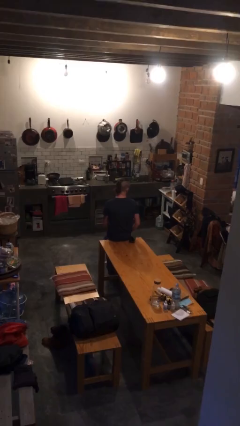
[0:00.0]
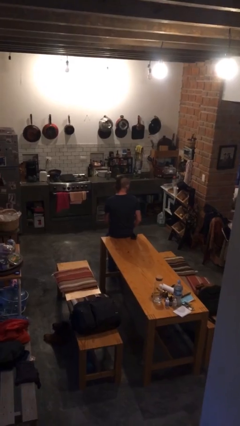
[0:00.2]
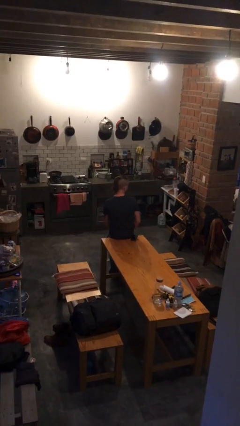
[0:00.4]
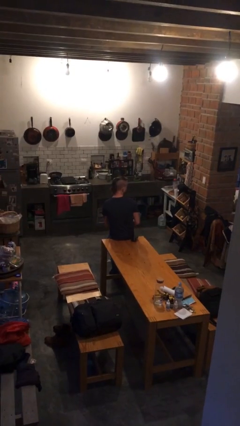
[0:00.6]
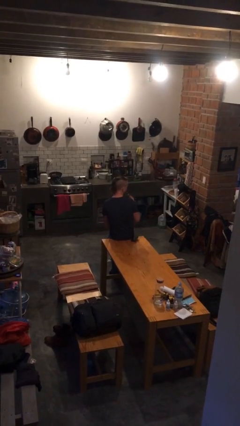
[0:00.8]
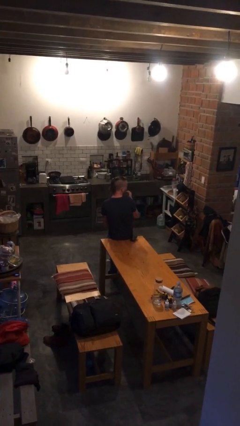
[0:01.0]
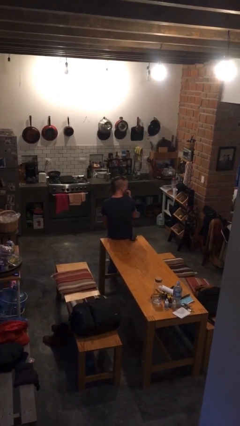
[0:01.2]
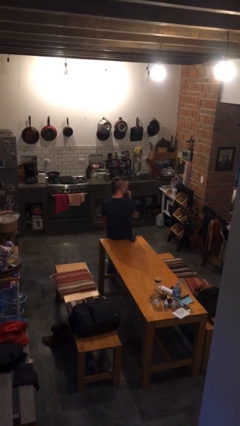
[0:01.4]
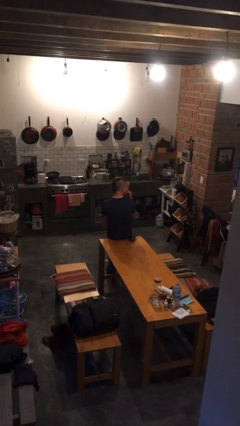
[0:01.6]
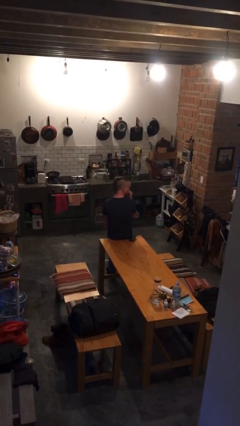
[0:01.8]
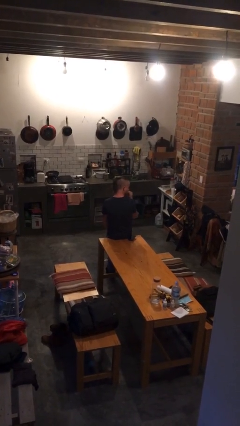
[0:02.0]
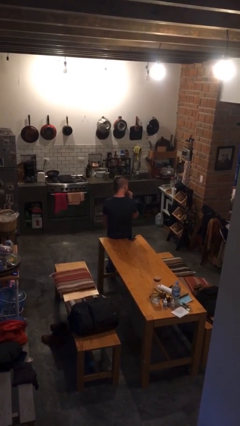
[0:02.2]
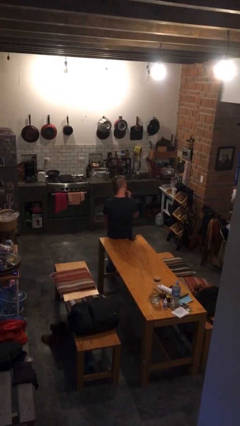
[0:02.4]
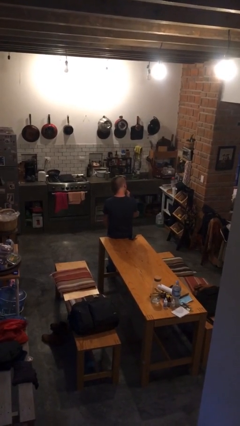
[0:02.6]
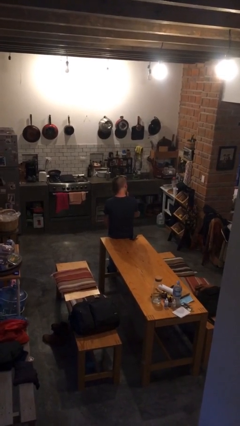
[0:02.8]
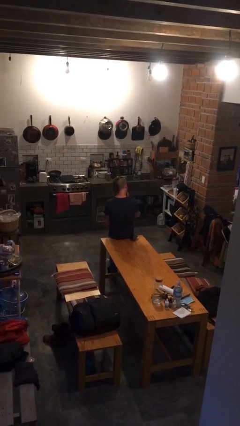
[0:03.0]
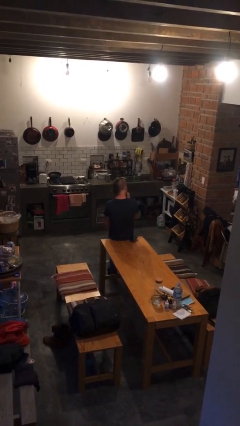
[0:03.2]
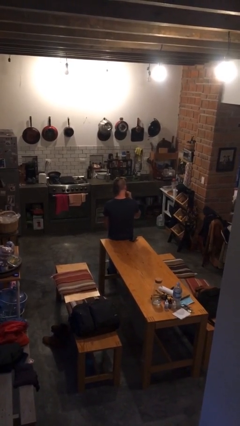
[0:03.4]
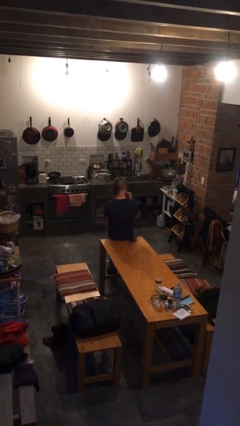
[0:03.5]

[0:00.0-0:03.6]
person applies lip makeup

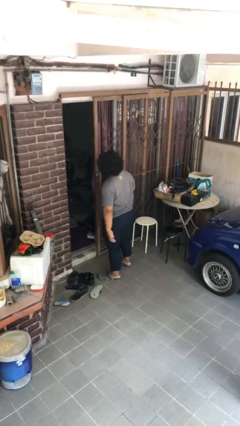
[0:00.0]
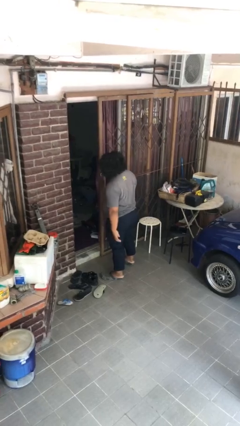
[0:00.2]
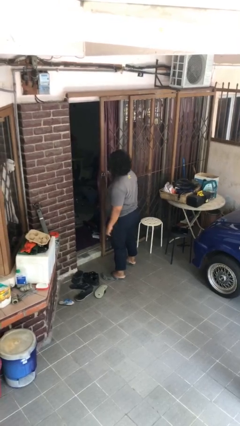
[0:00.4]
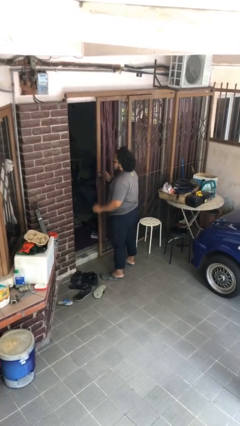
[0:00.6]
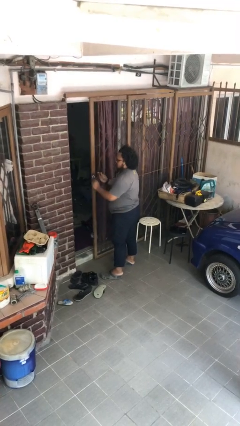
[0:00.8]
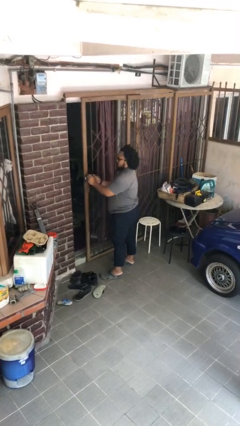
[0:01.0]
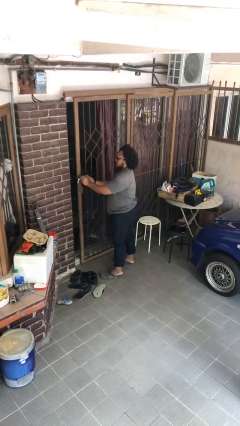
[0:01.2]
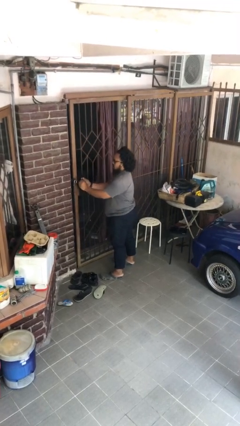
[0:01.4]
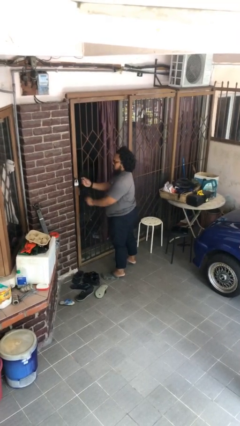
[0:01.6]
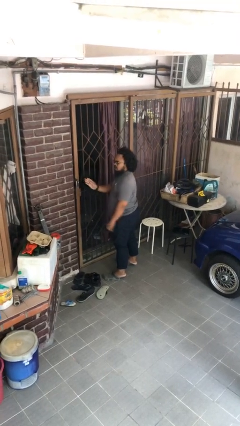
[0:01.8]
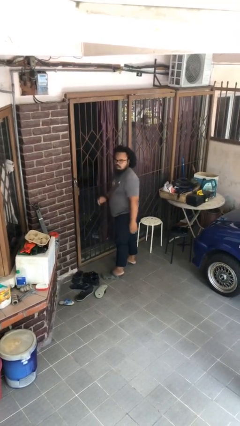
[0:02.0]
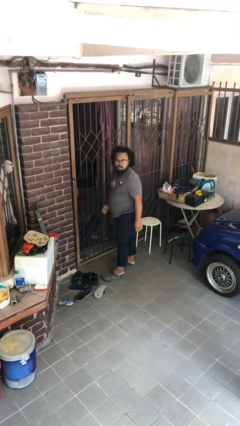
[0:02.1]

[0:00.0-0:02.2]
person closes facility door

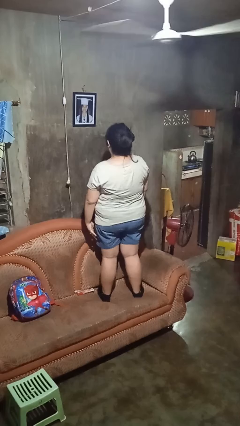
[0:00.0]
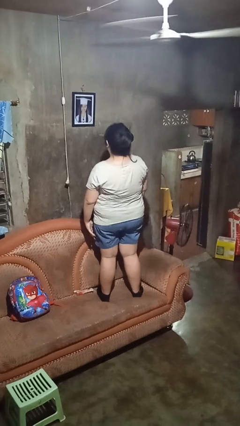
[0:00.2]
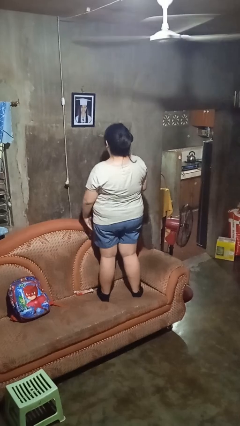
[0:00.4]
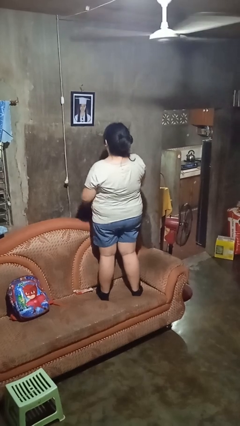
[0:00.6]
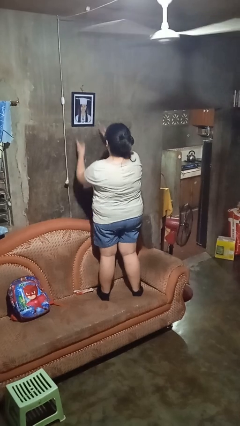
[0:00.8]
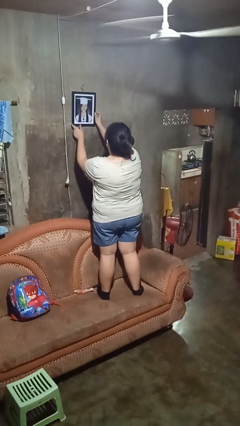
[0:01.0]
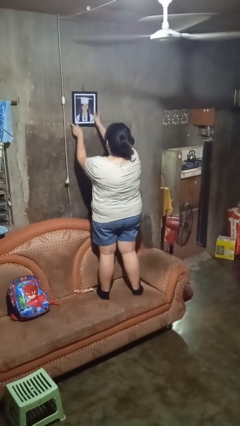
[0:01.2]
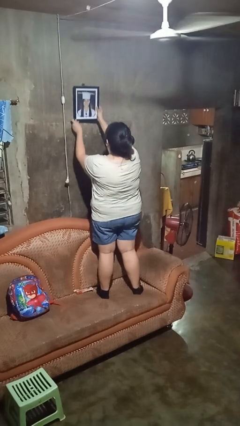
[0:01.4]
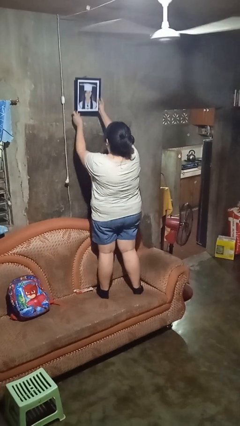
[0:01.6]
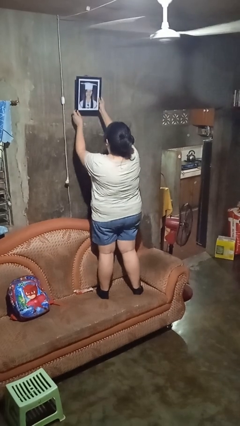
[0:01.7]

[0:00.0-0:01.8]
person takes down picture frame

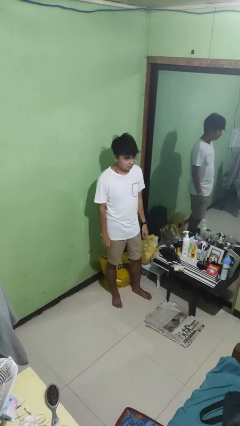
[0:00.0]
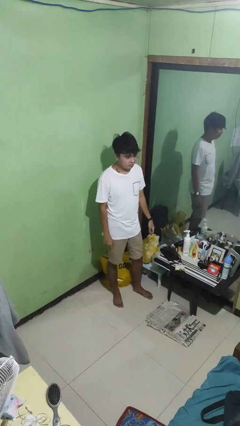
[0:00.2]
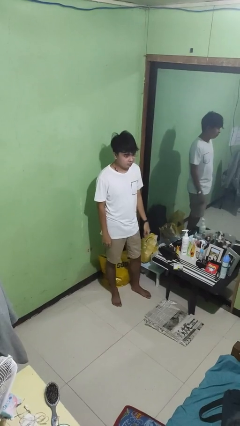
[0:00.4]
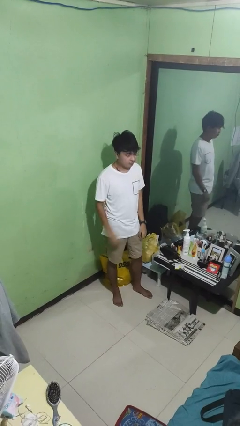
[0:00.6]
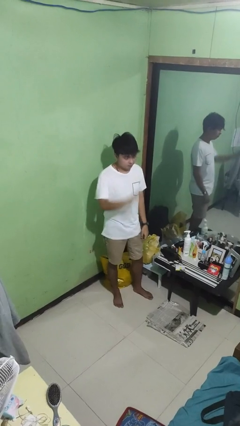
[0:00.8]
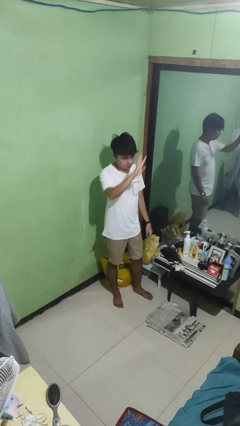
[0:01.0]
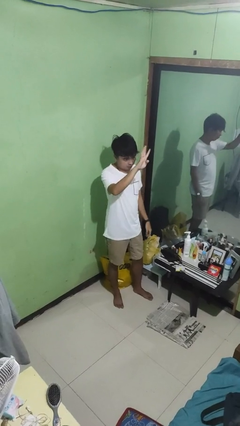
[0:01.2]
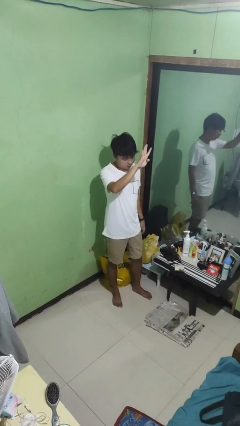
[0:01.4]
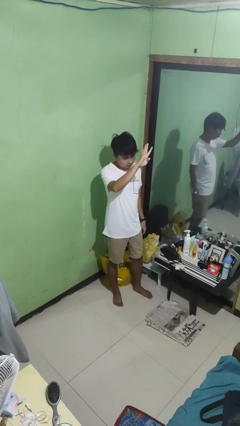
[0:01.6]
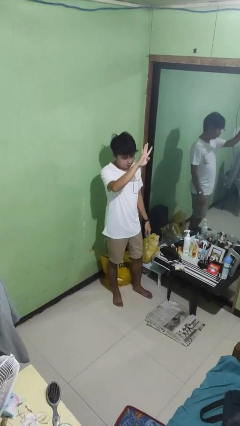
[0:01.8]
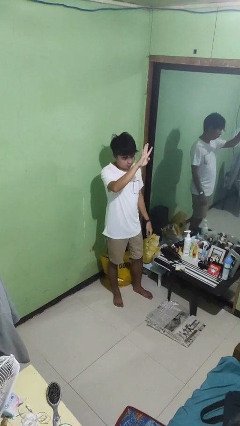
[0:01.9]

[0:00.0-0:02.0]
person gestures number four

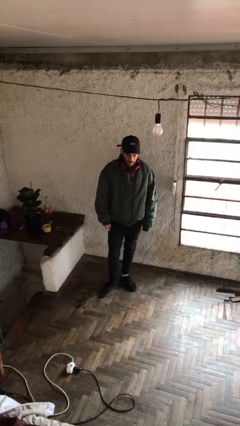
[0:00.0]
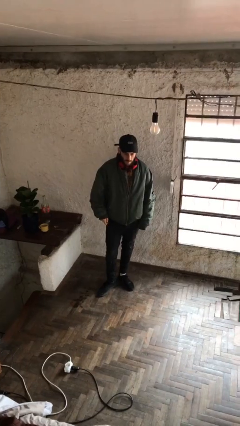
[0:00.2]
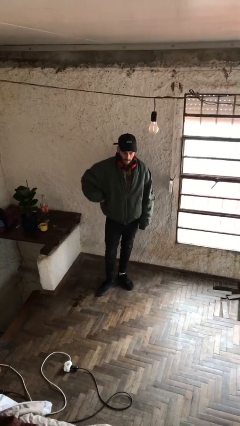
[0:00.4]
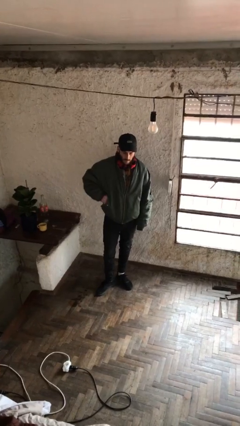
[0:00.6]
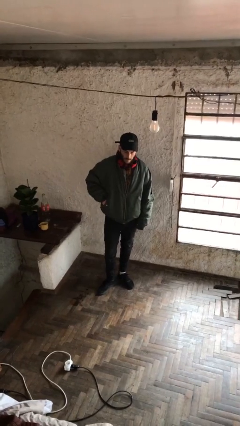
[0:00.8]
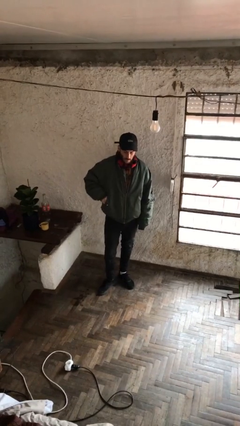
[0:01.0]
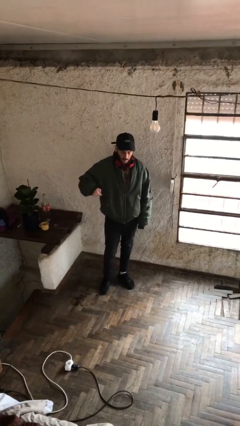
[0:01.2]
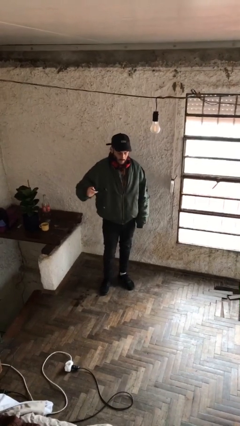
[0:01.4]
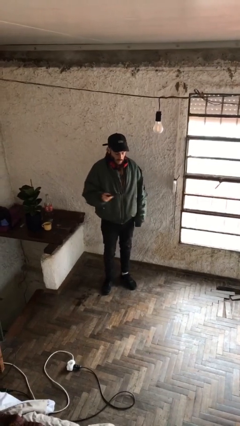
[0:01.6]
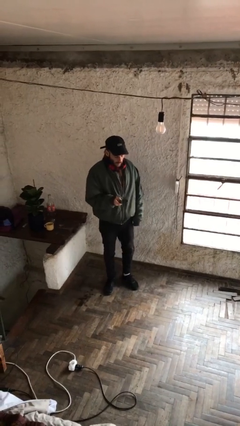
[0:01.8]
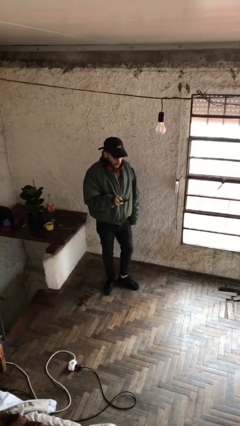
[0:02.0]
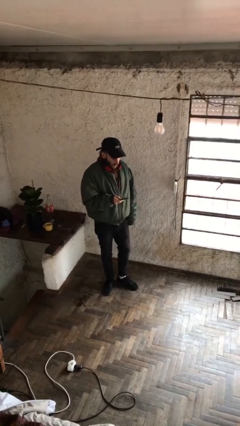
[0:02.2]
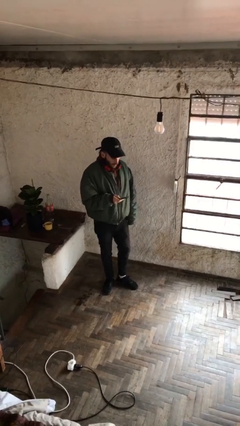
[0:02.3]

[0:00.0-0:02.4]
person takes phone from pocket

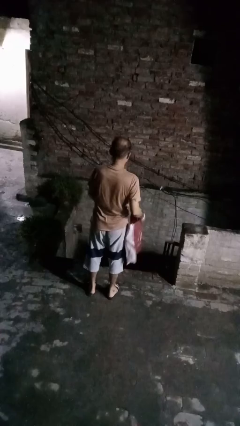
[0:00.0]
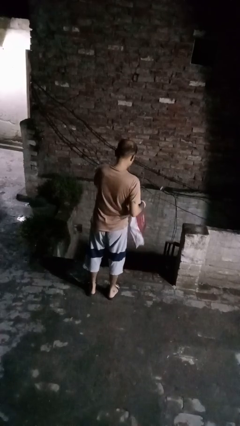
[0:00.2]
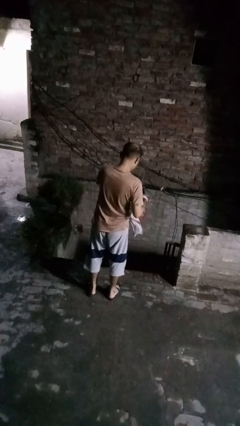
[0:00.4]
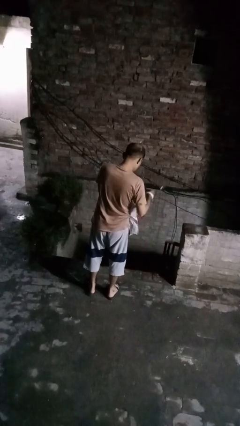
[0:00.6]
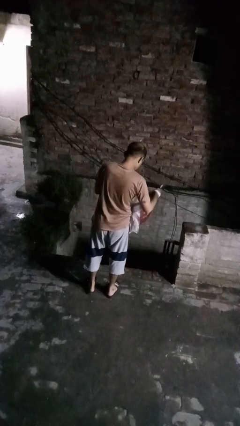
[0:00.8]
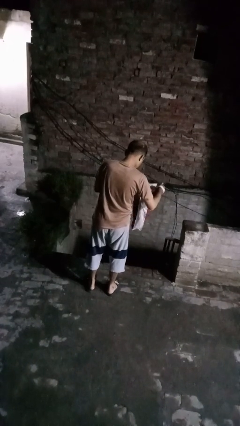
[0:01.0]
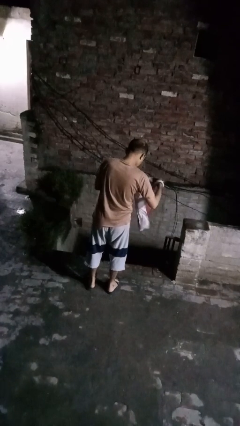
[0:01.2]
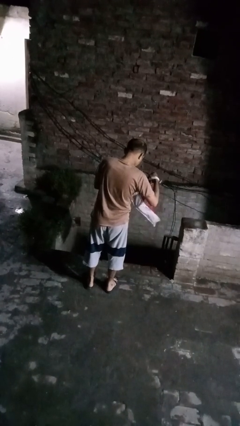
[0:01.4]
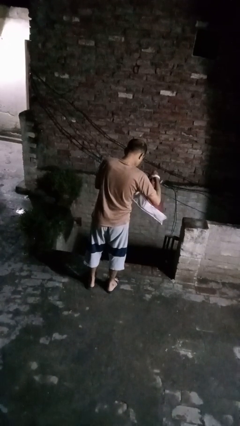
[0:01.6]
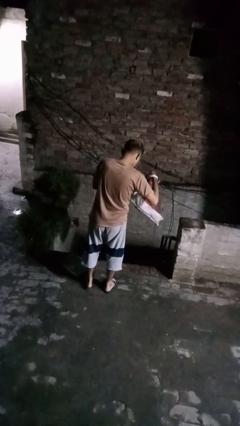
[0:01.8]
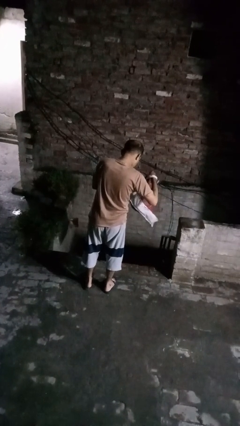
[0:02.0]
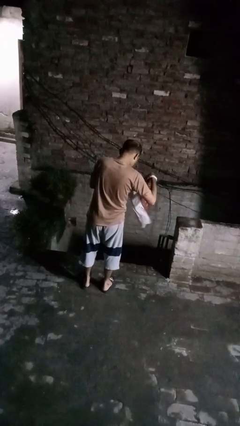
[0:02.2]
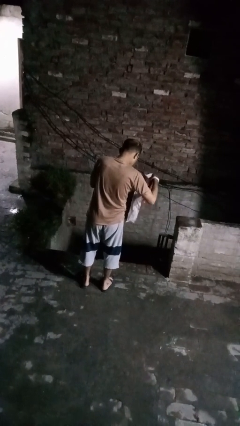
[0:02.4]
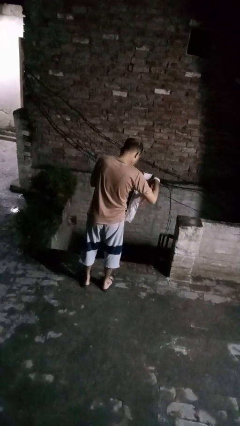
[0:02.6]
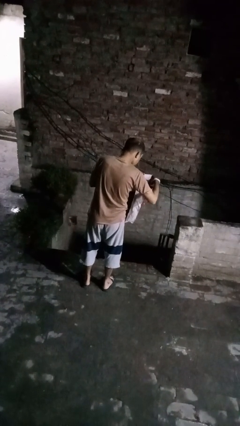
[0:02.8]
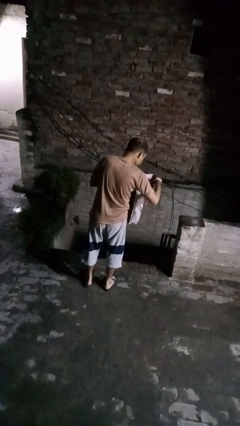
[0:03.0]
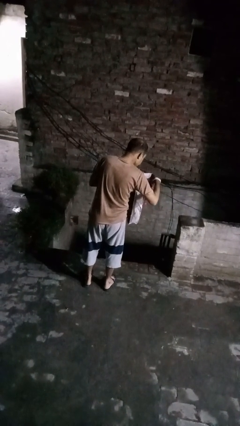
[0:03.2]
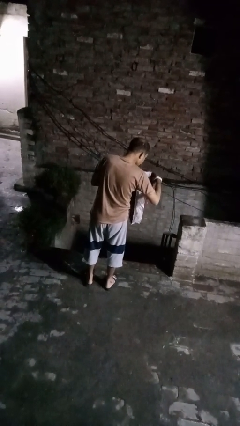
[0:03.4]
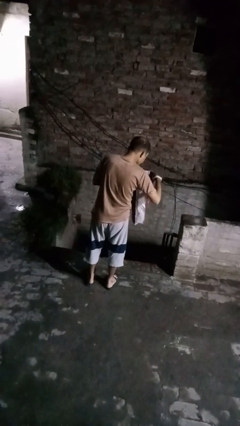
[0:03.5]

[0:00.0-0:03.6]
person searches in bag

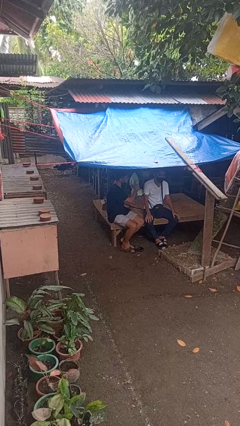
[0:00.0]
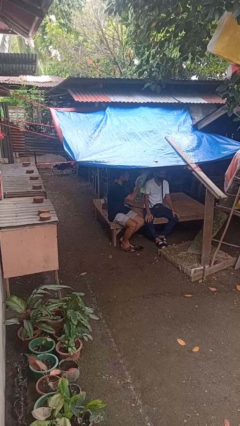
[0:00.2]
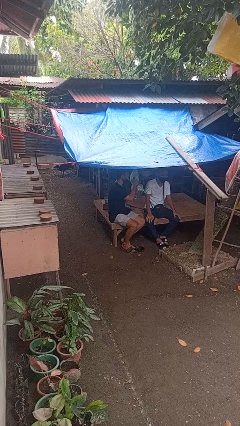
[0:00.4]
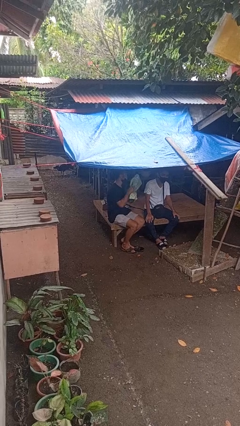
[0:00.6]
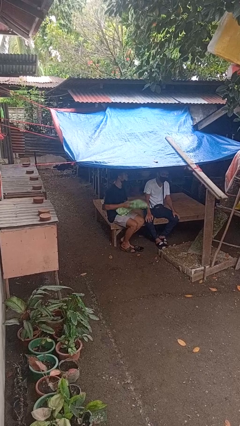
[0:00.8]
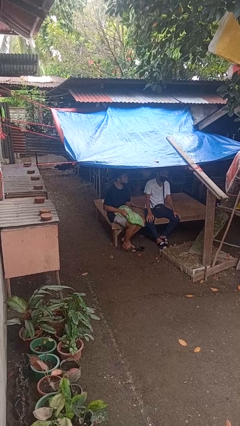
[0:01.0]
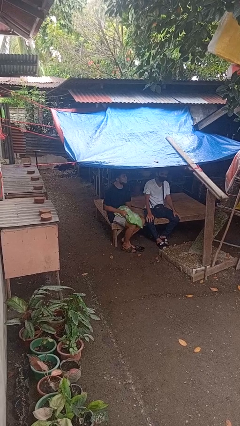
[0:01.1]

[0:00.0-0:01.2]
person hits person with pillow
